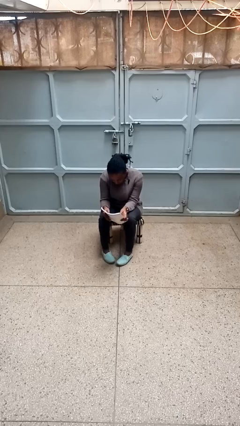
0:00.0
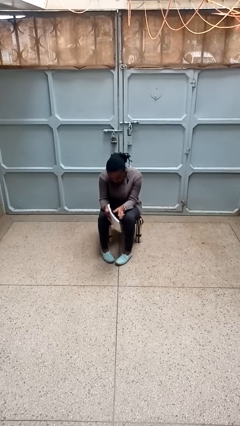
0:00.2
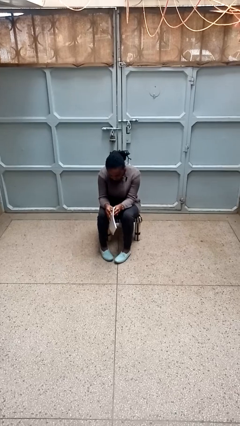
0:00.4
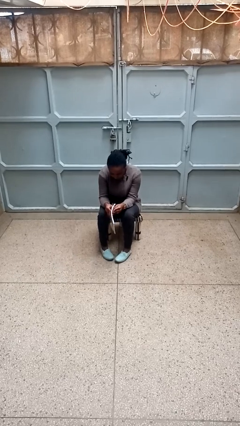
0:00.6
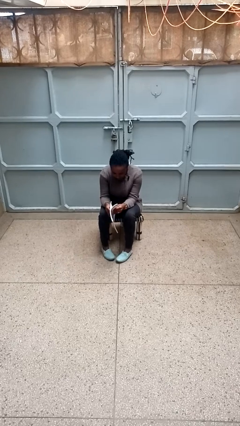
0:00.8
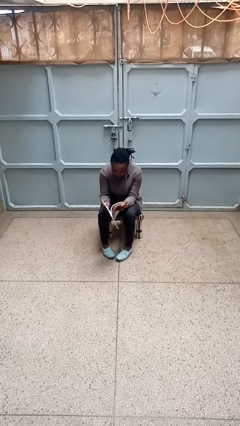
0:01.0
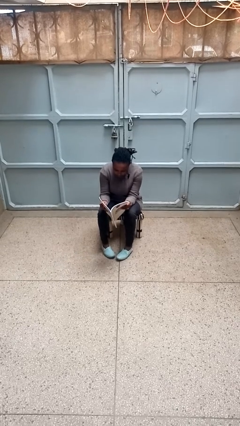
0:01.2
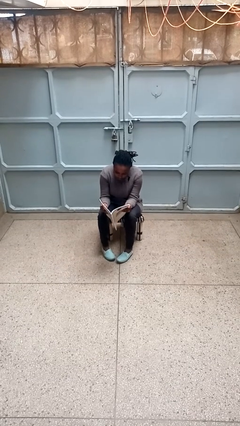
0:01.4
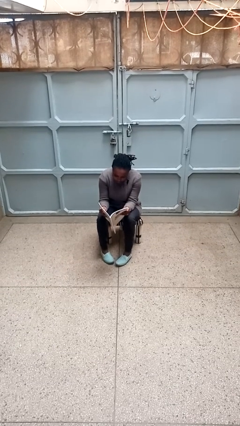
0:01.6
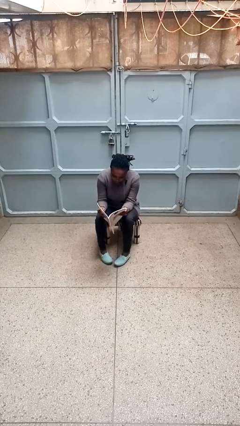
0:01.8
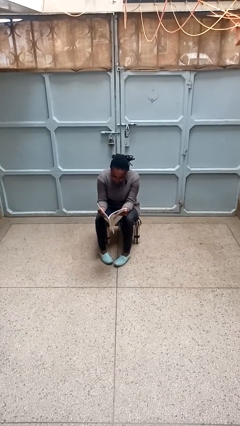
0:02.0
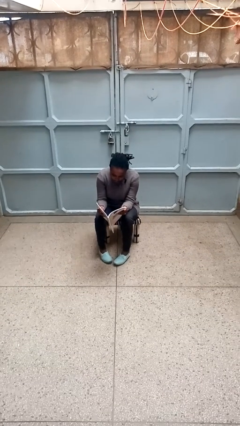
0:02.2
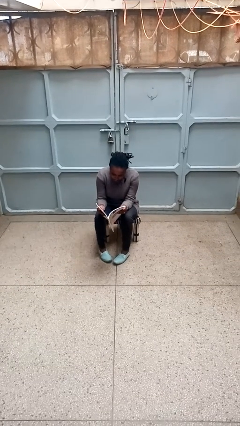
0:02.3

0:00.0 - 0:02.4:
person reads magazine

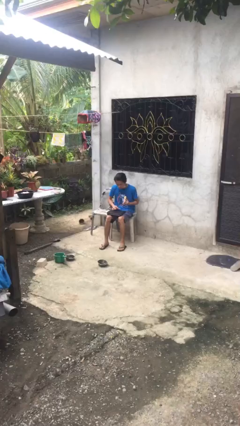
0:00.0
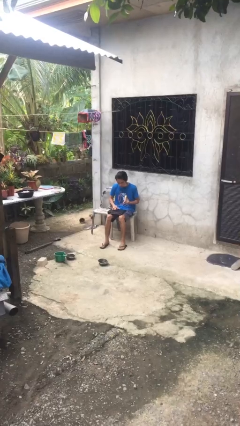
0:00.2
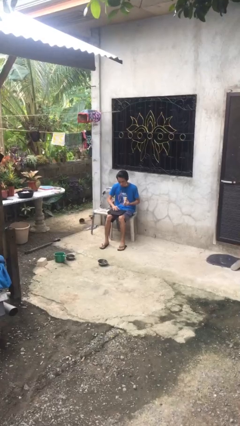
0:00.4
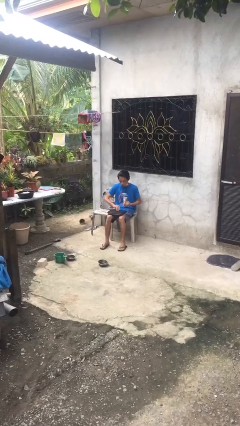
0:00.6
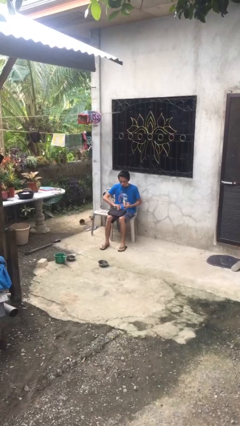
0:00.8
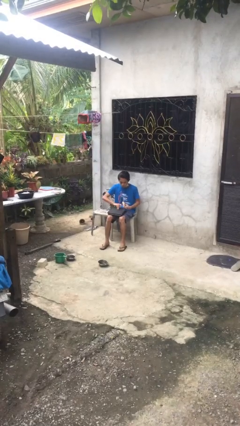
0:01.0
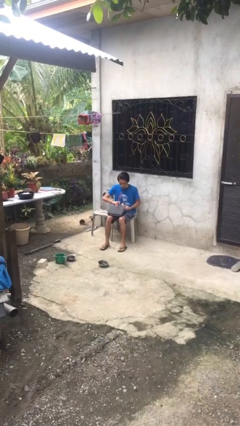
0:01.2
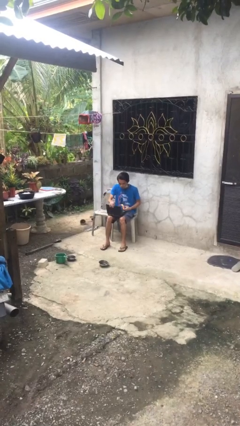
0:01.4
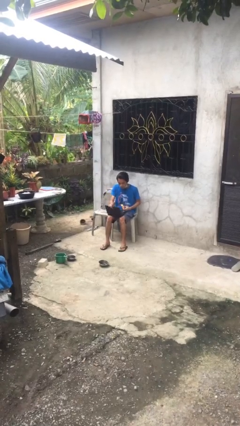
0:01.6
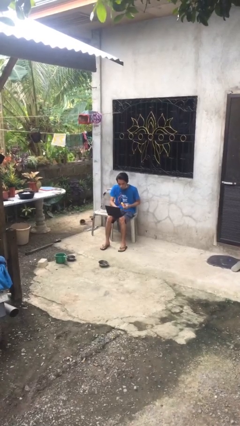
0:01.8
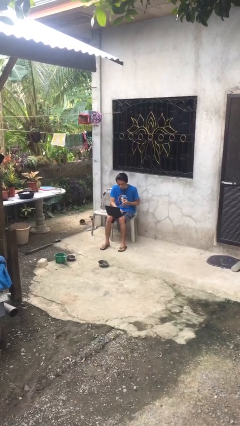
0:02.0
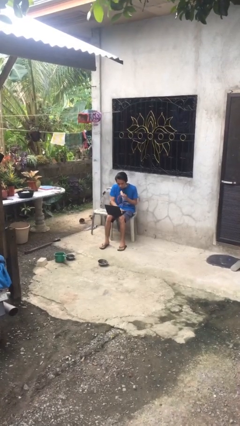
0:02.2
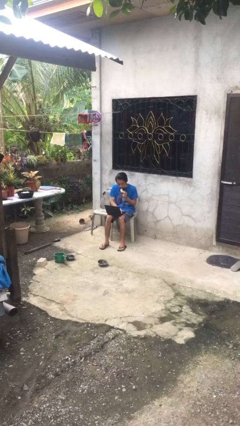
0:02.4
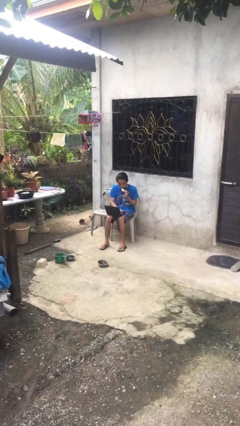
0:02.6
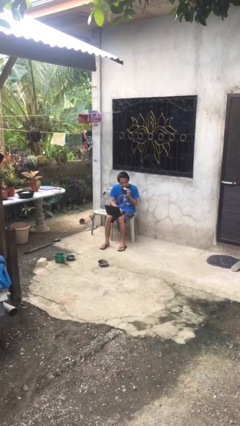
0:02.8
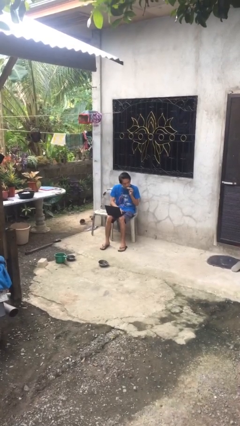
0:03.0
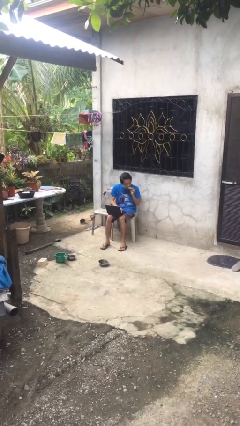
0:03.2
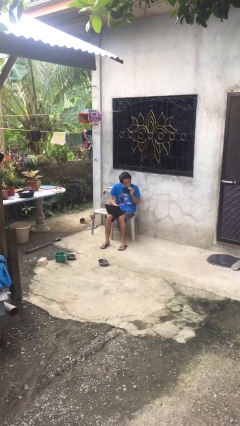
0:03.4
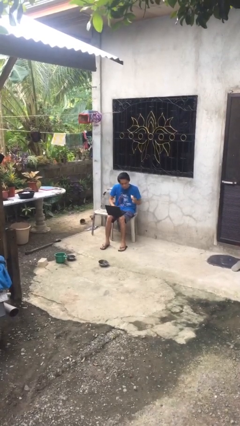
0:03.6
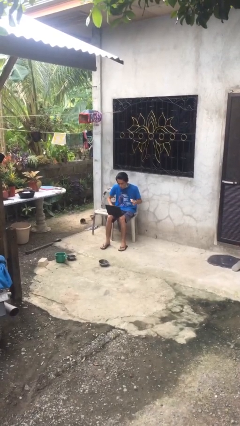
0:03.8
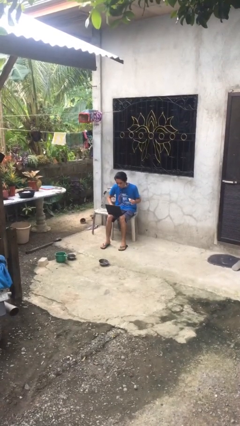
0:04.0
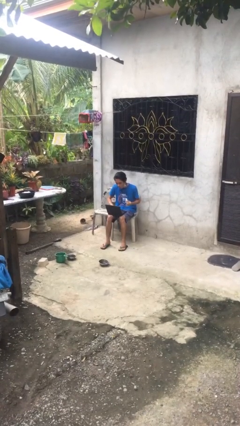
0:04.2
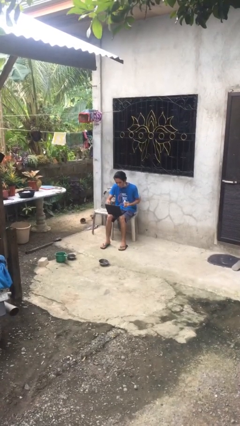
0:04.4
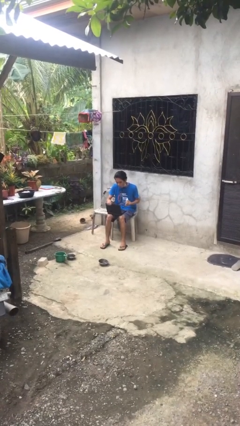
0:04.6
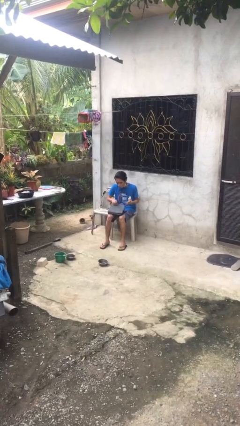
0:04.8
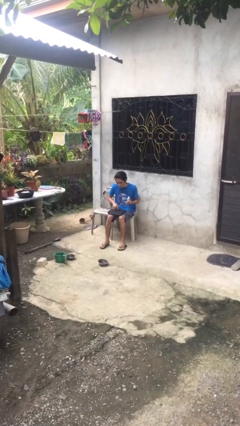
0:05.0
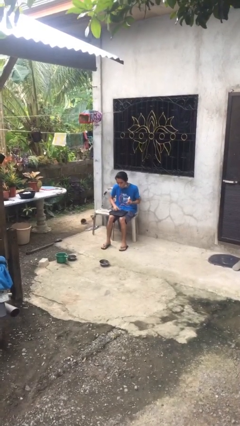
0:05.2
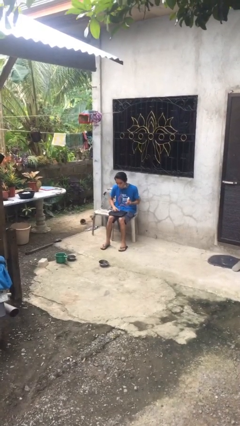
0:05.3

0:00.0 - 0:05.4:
person interacts with laptop

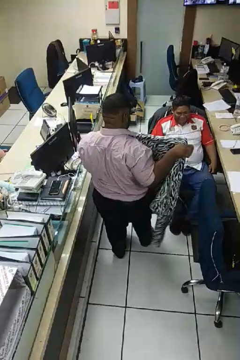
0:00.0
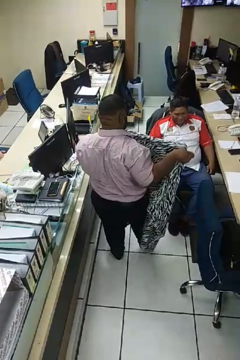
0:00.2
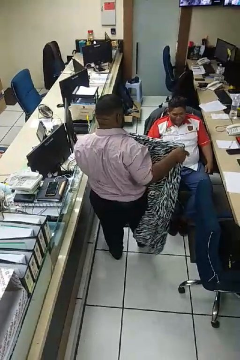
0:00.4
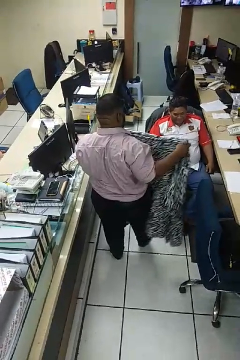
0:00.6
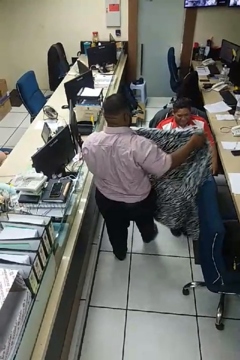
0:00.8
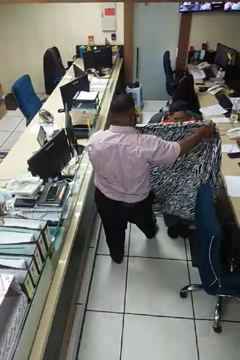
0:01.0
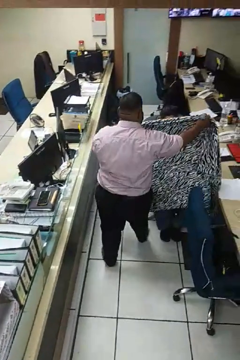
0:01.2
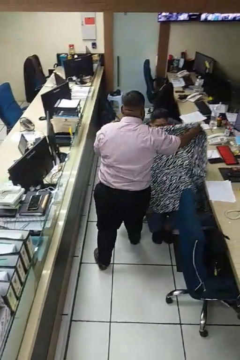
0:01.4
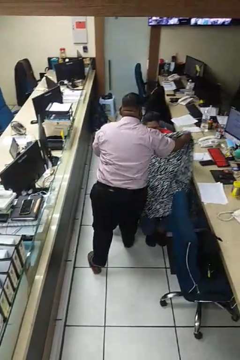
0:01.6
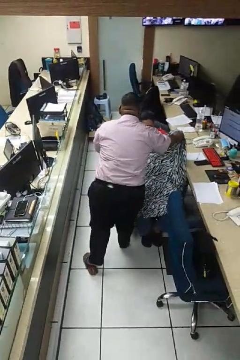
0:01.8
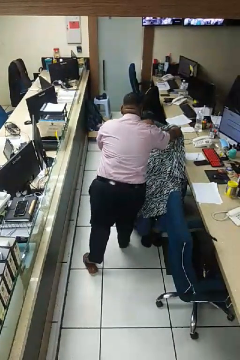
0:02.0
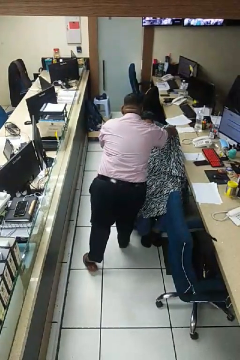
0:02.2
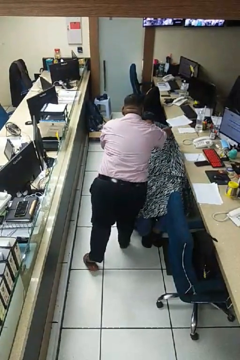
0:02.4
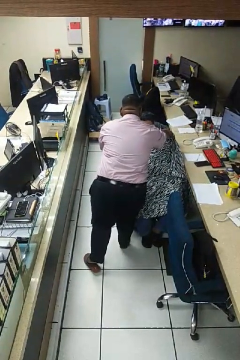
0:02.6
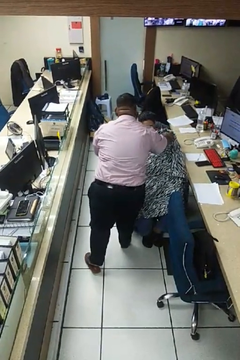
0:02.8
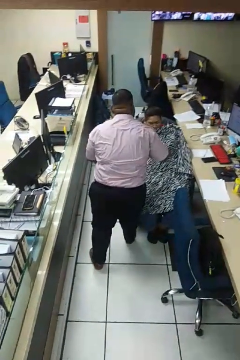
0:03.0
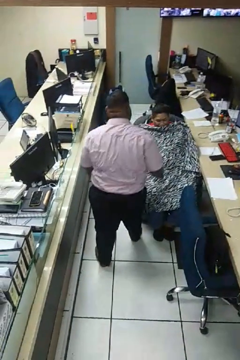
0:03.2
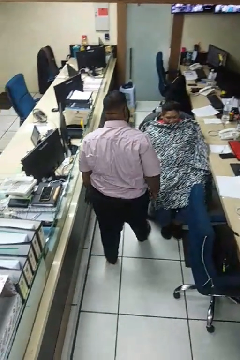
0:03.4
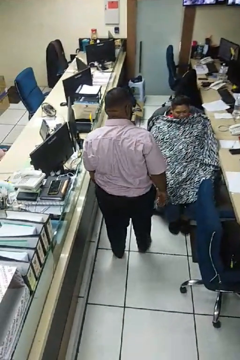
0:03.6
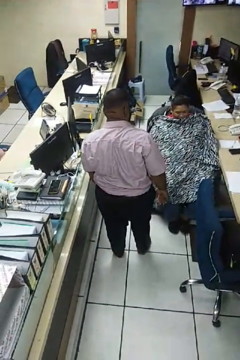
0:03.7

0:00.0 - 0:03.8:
person covers friend with blanket

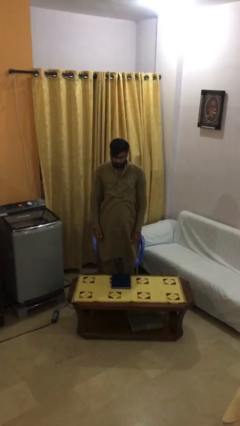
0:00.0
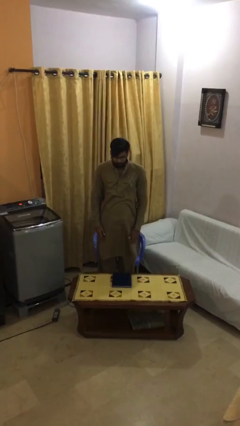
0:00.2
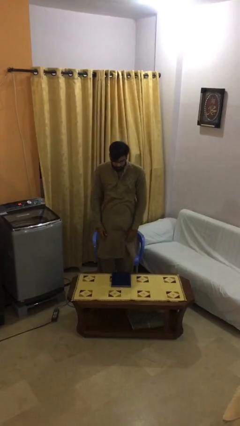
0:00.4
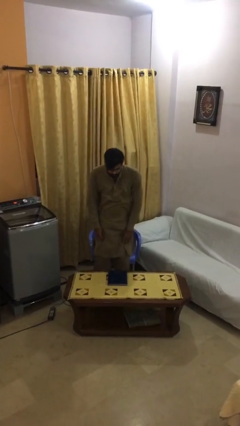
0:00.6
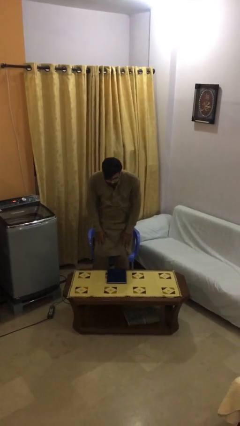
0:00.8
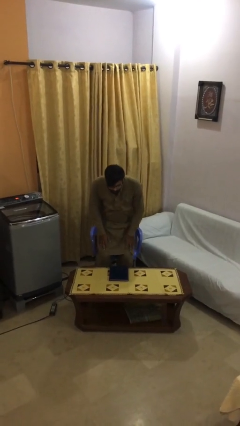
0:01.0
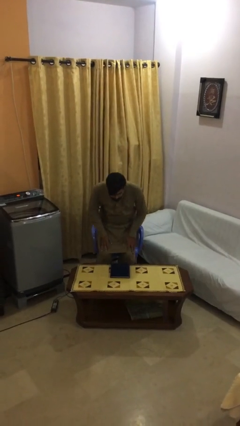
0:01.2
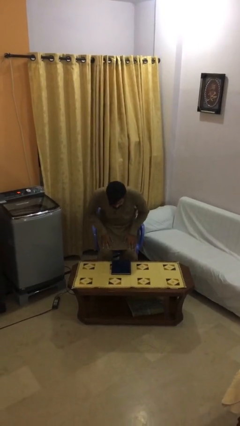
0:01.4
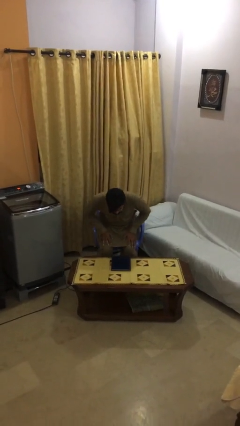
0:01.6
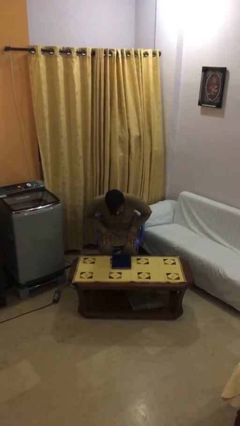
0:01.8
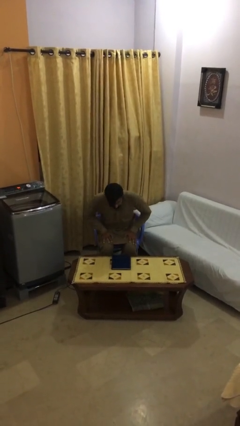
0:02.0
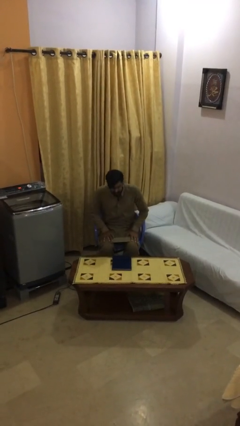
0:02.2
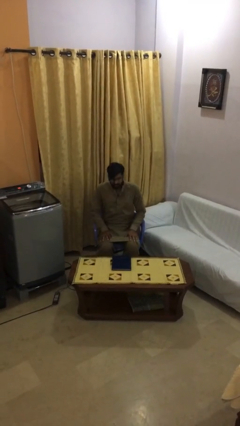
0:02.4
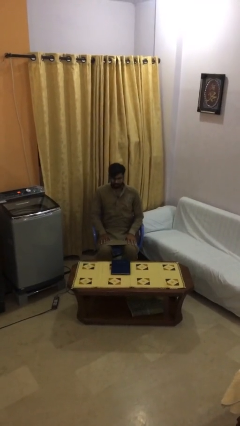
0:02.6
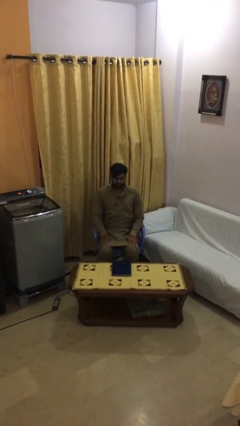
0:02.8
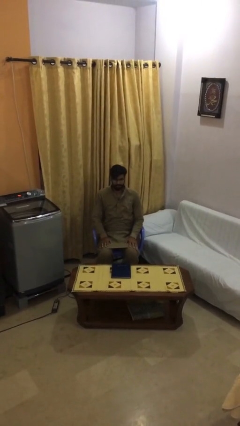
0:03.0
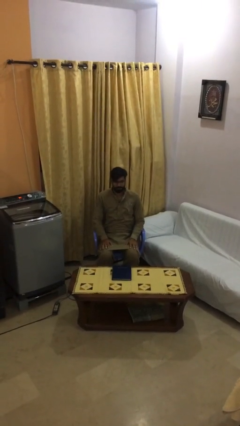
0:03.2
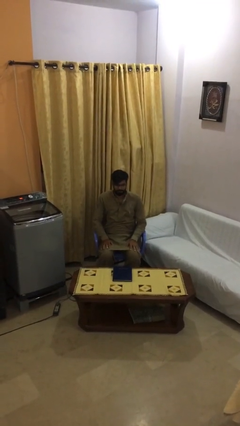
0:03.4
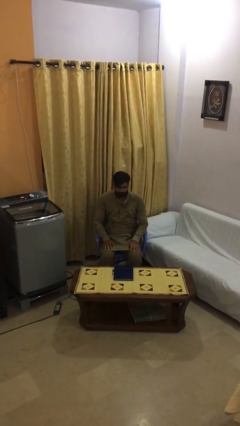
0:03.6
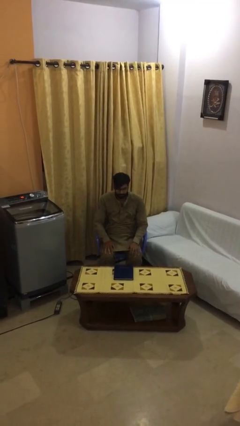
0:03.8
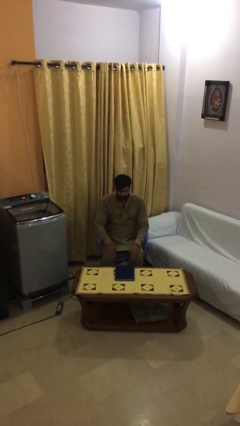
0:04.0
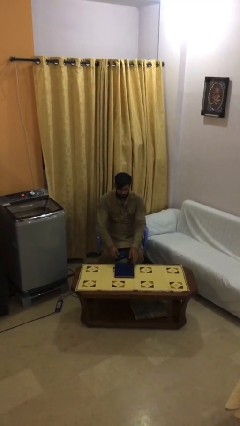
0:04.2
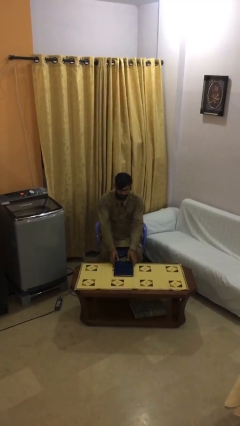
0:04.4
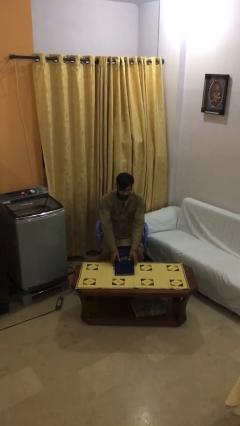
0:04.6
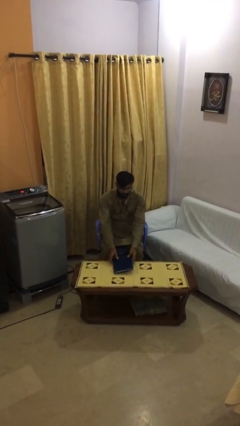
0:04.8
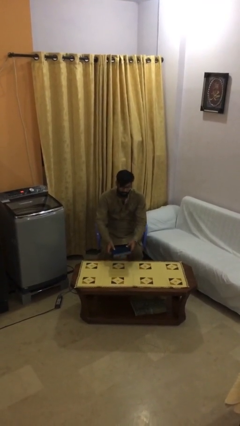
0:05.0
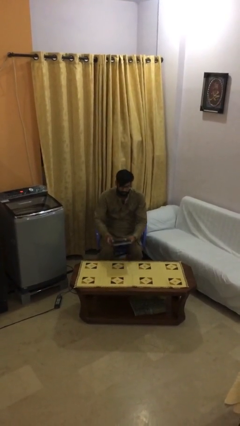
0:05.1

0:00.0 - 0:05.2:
person sits down

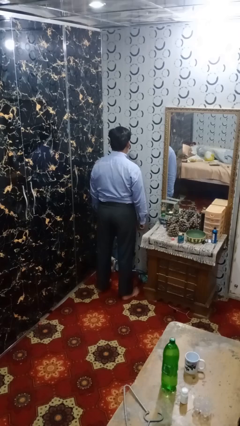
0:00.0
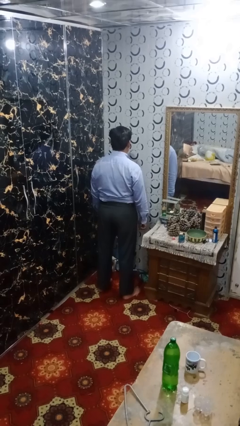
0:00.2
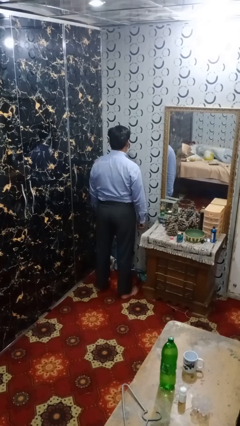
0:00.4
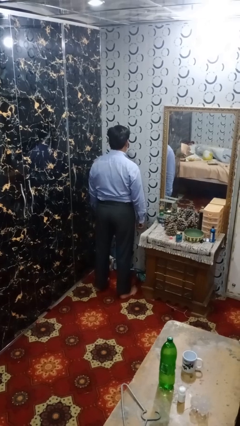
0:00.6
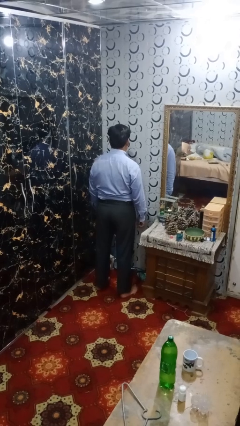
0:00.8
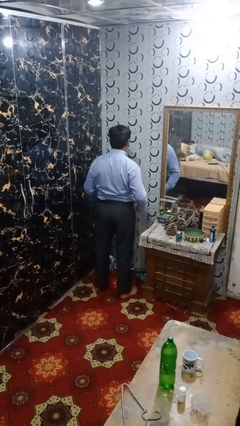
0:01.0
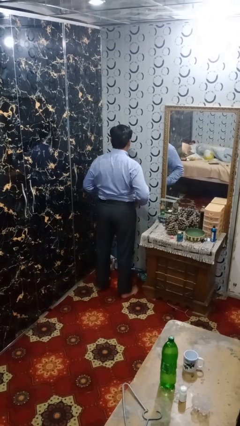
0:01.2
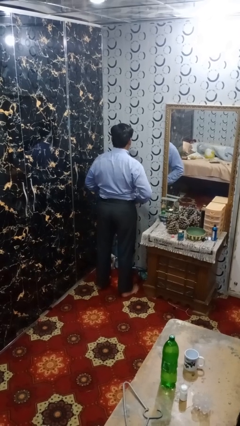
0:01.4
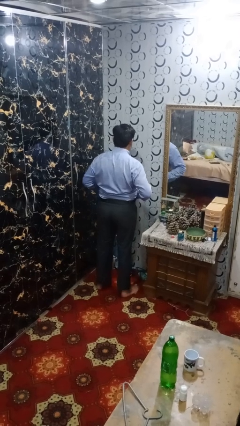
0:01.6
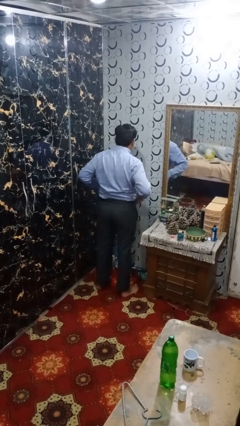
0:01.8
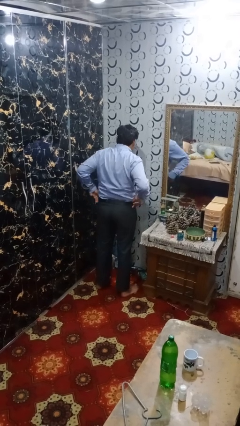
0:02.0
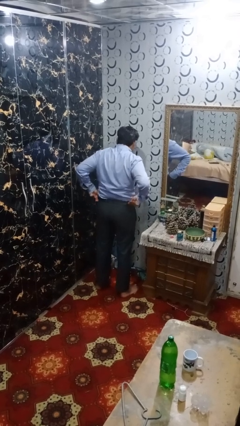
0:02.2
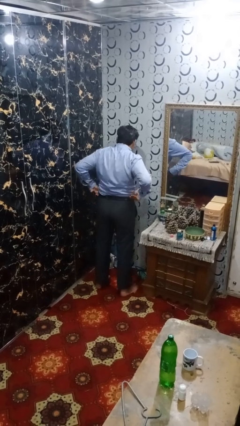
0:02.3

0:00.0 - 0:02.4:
person hikes up pants
